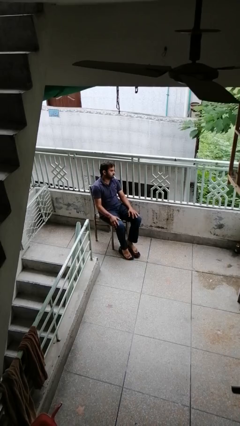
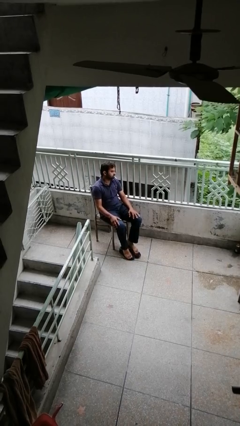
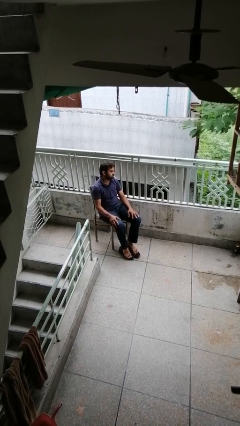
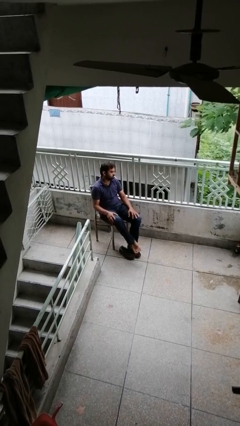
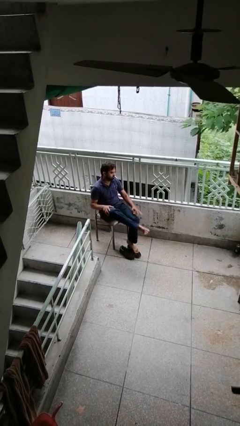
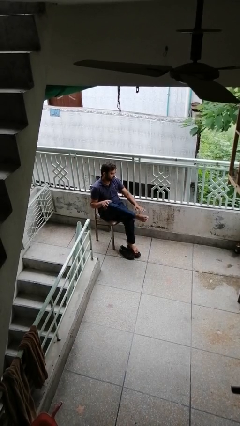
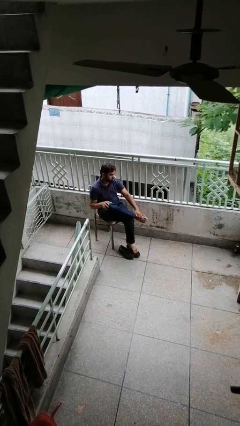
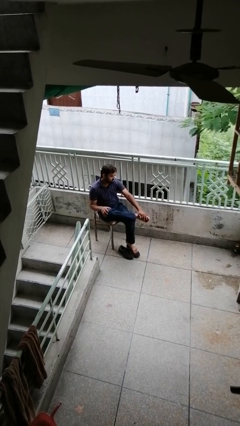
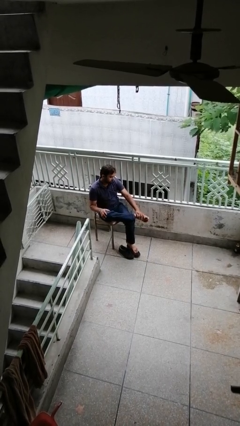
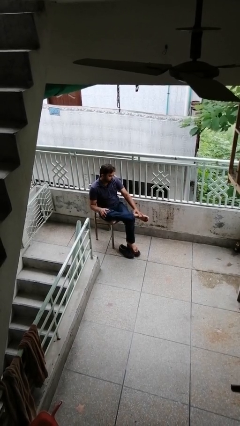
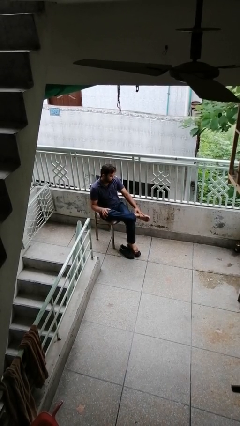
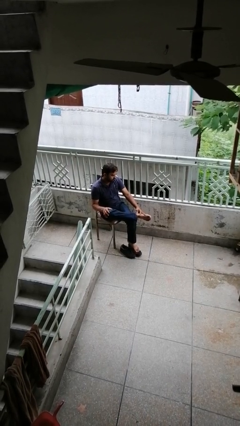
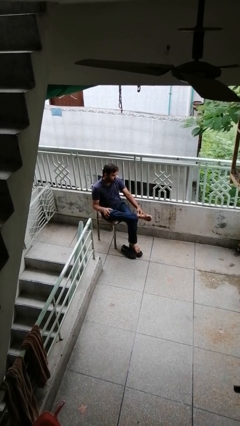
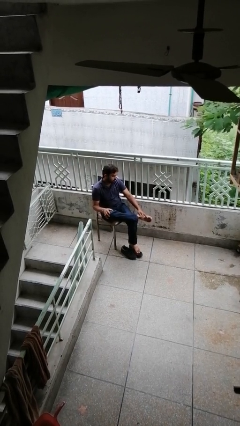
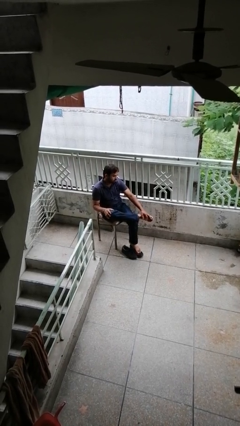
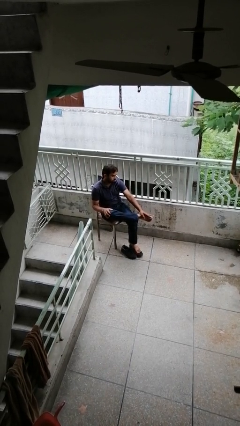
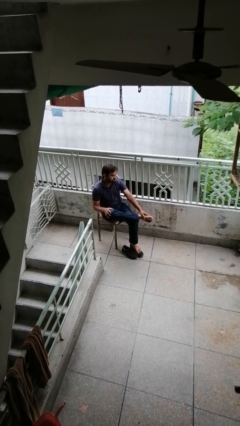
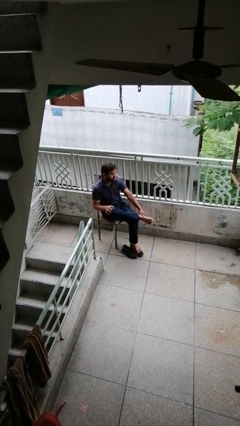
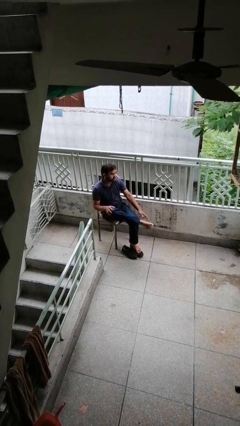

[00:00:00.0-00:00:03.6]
person rubs foot

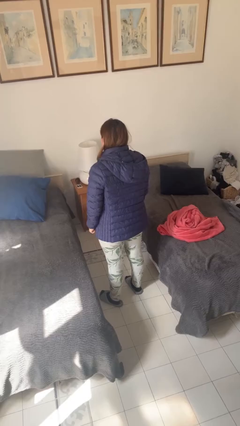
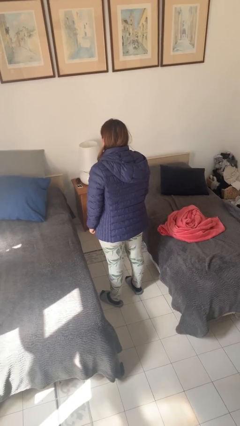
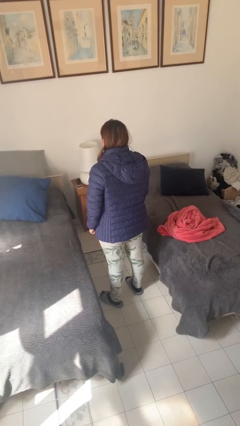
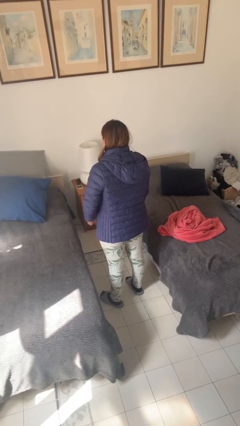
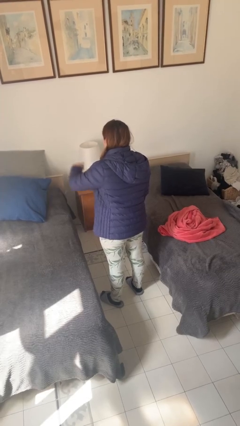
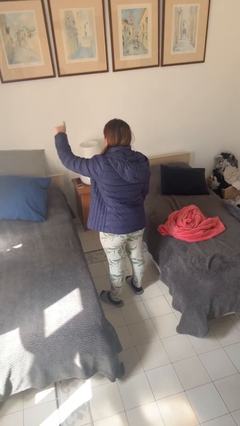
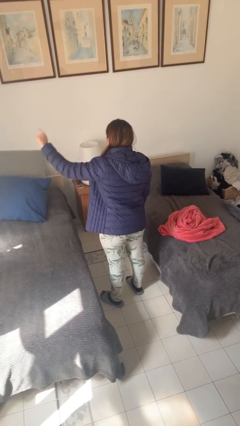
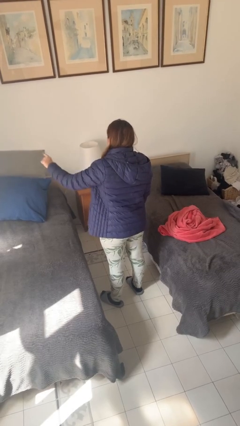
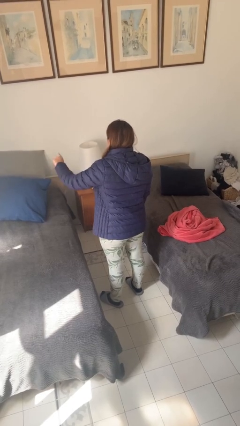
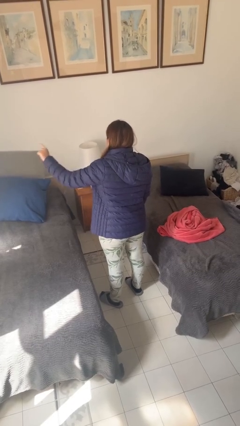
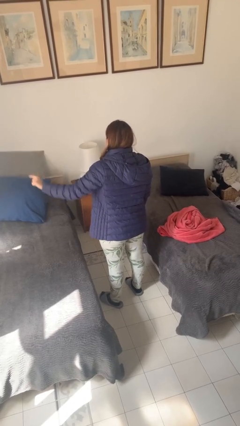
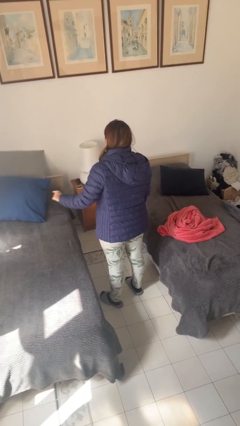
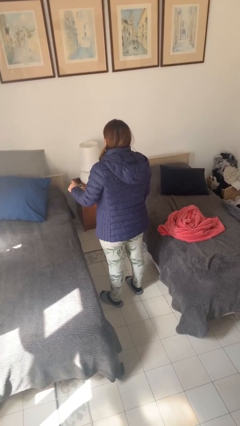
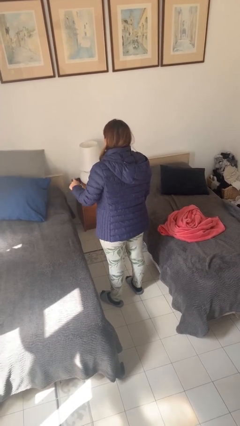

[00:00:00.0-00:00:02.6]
person gestures number three

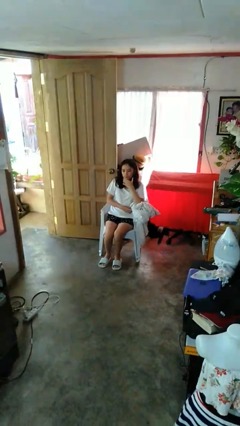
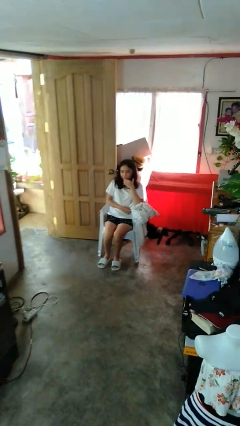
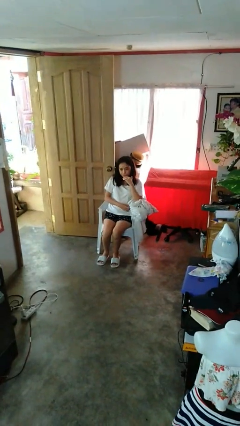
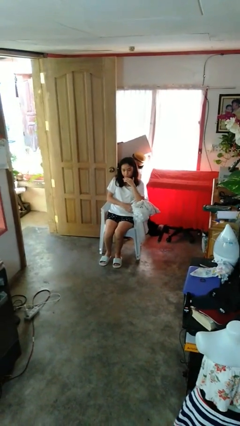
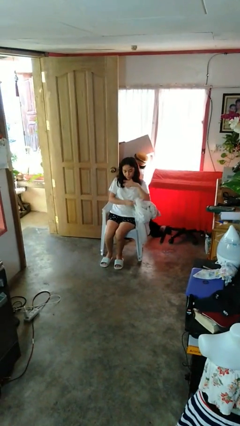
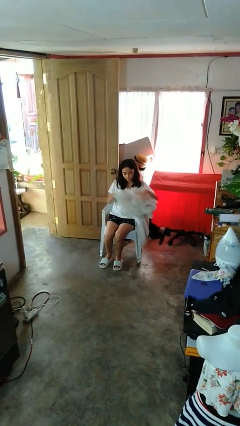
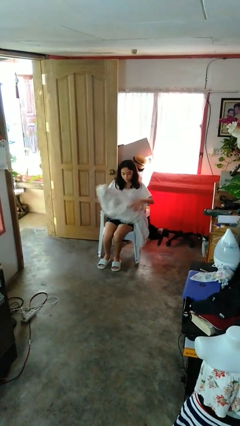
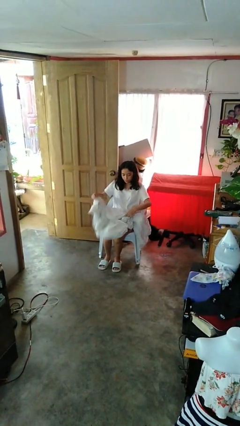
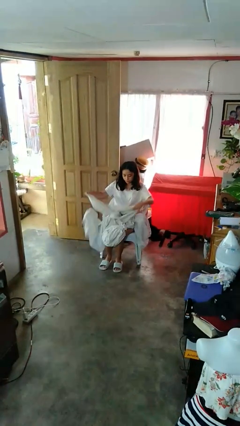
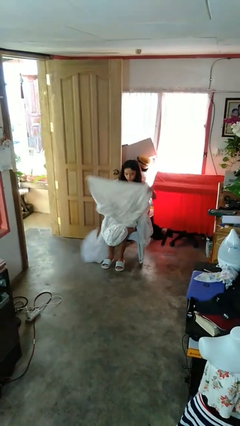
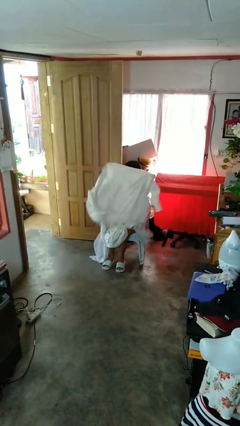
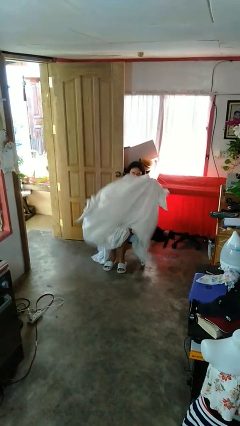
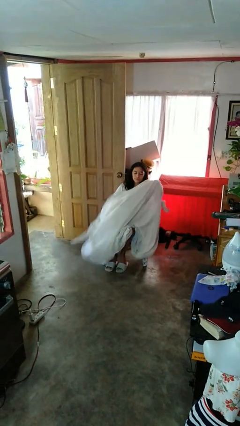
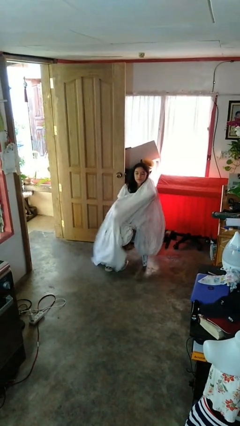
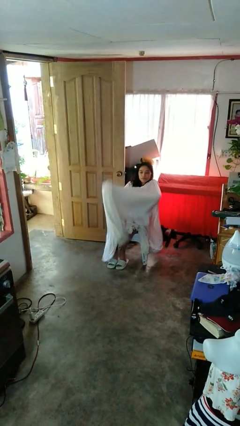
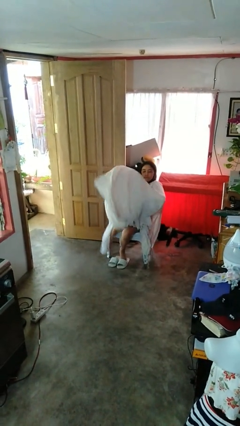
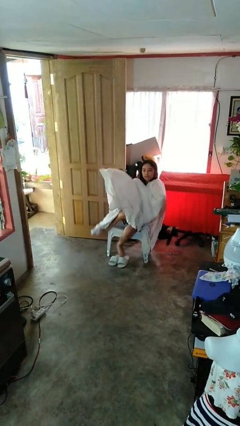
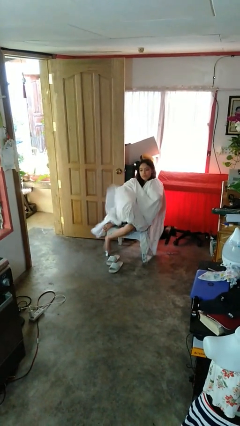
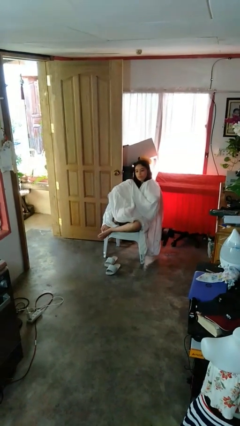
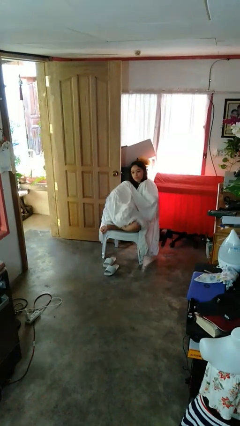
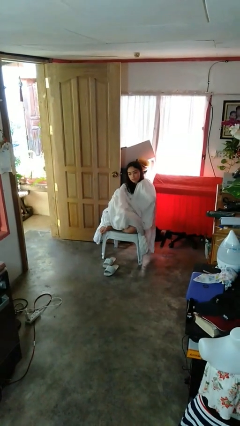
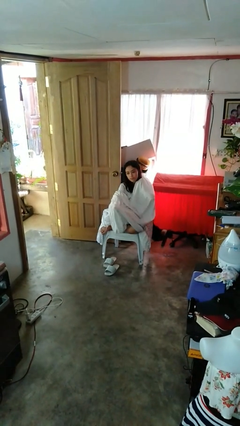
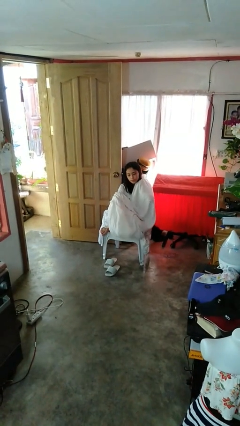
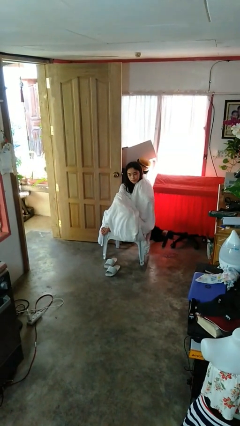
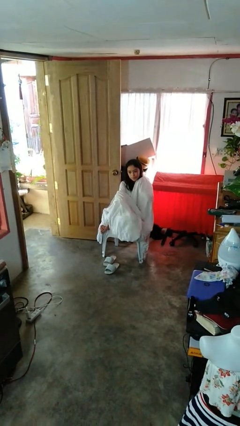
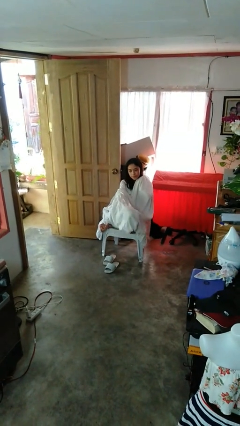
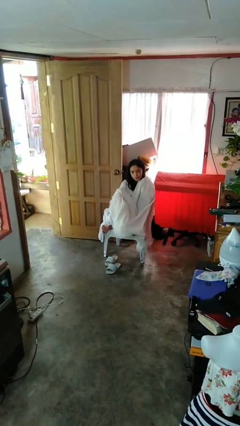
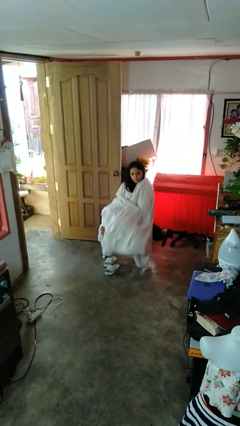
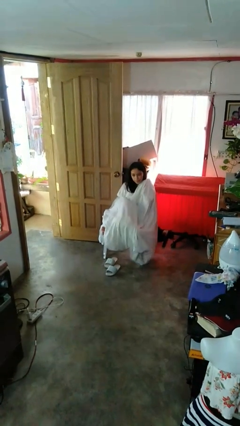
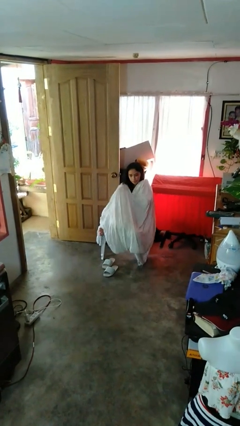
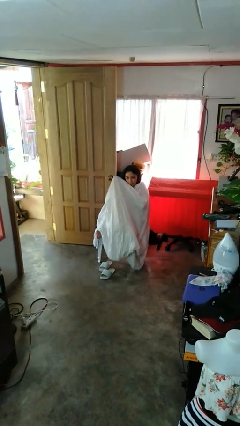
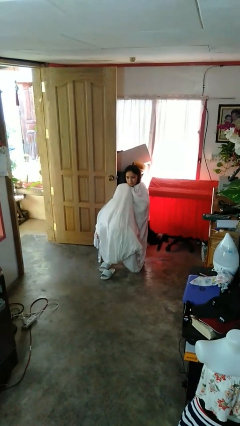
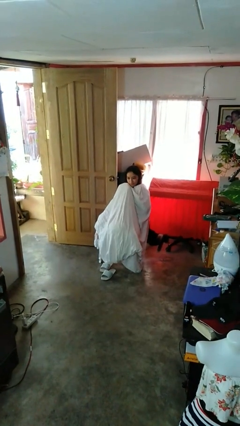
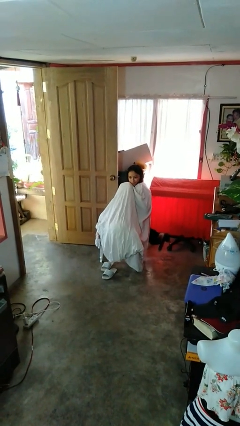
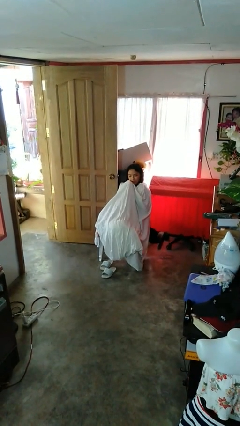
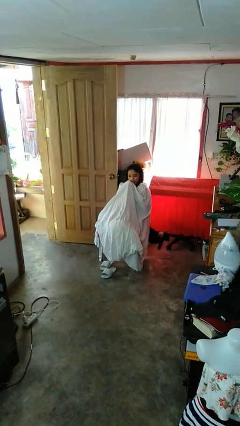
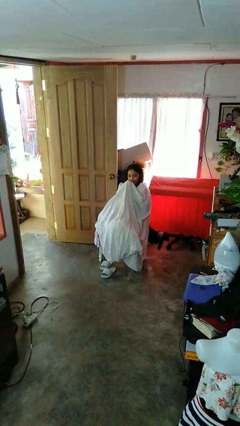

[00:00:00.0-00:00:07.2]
person covers with blanket

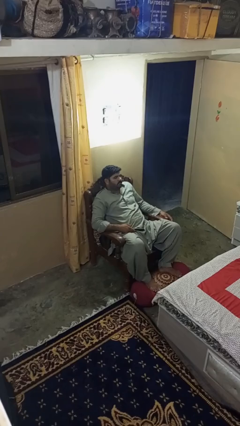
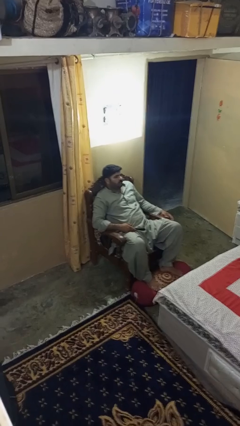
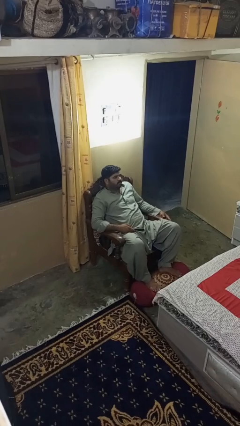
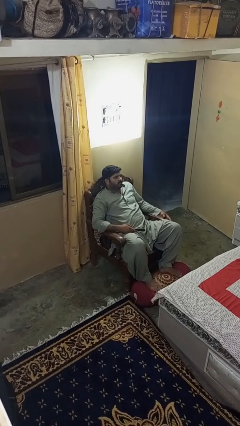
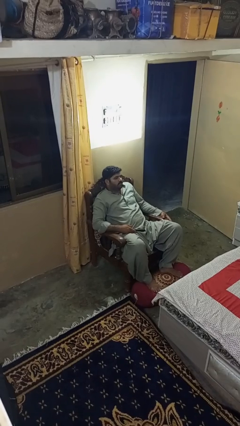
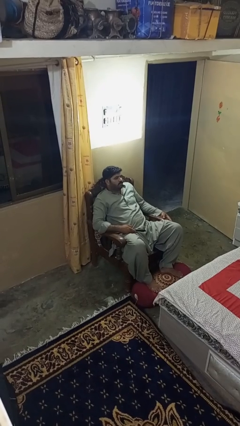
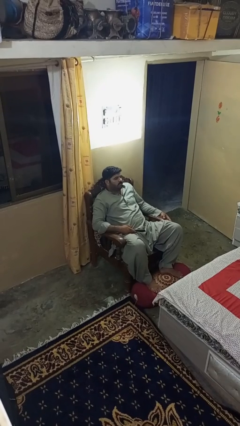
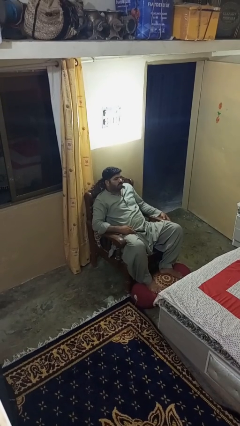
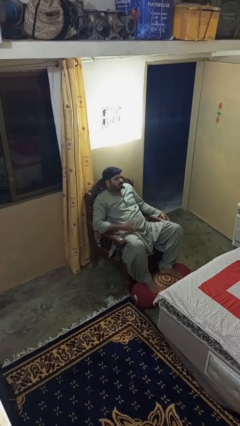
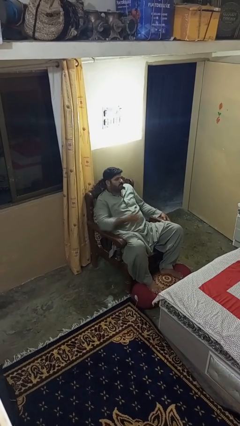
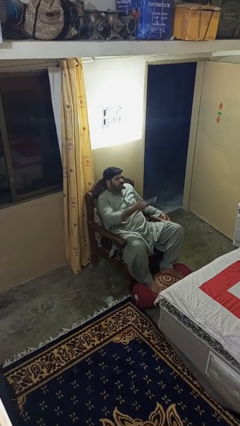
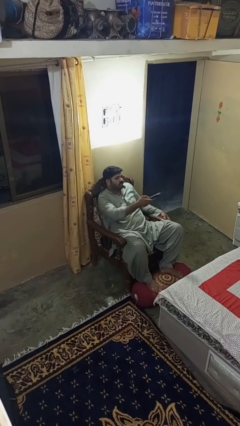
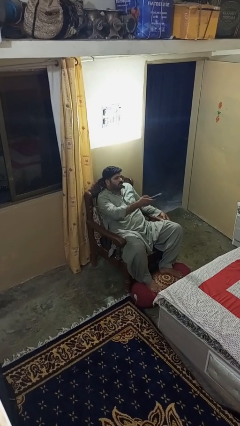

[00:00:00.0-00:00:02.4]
person uses television remote

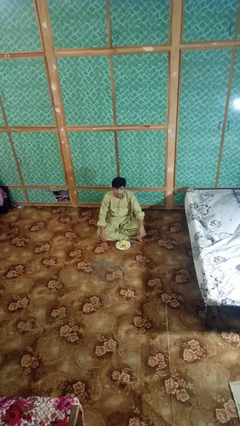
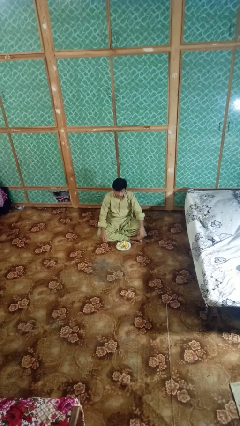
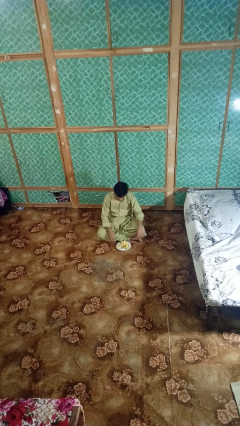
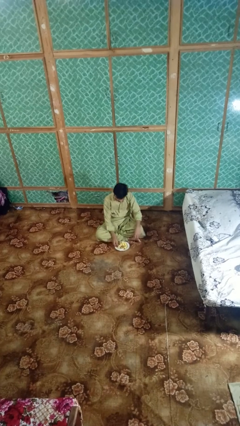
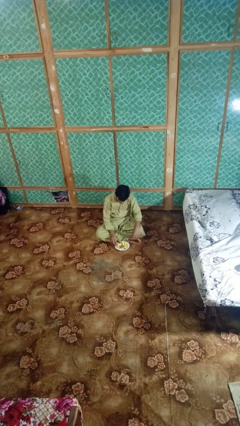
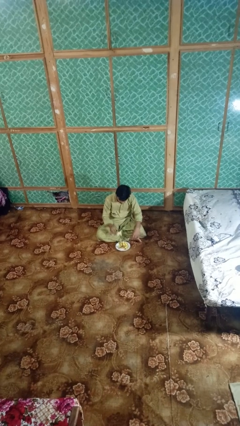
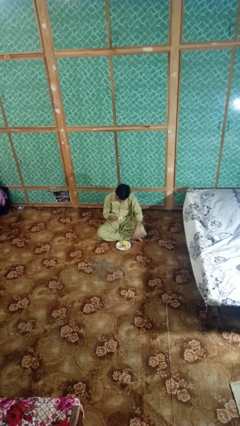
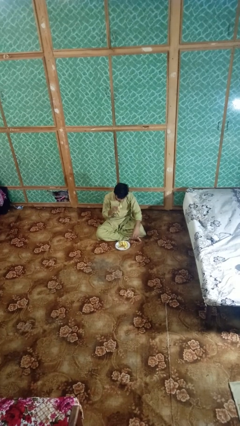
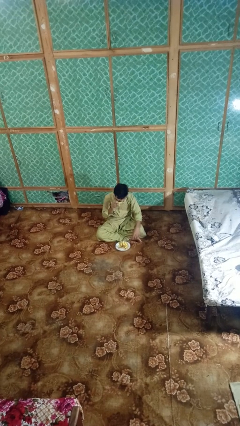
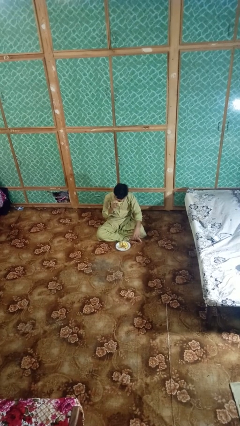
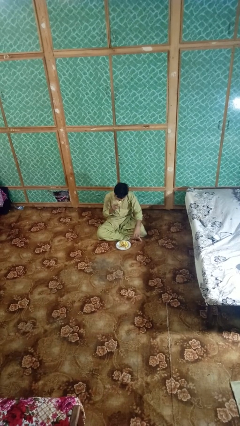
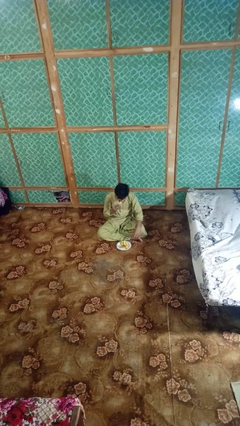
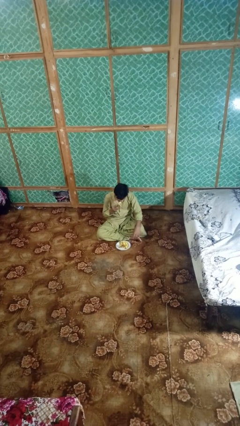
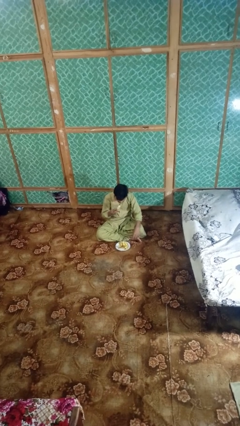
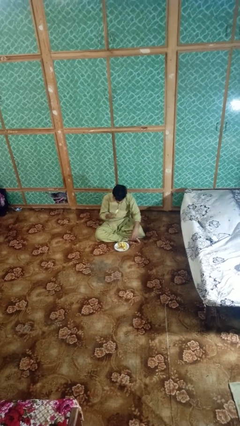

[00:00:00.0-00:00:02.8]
person eats banana
